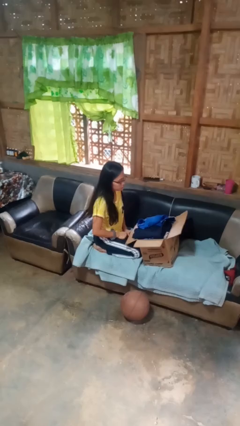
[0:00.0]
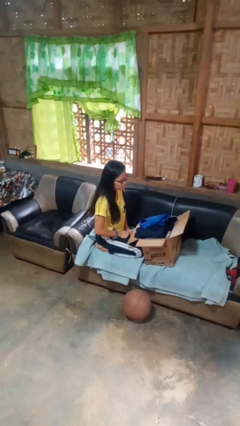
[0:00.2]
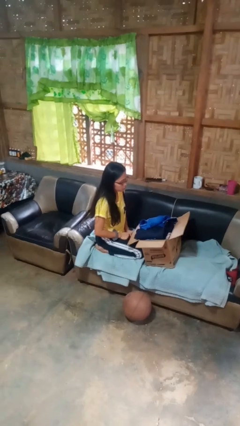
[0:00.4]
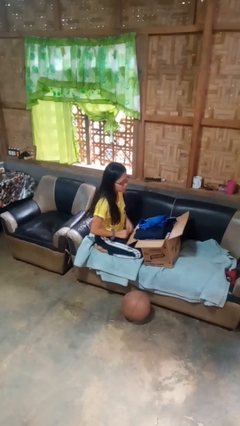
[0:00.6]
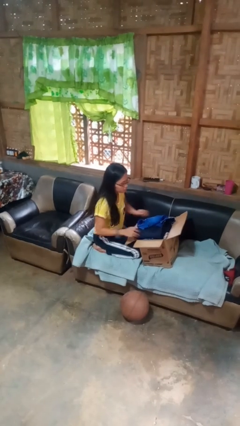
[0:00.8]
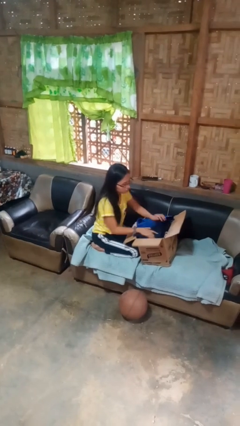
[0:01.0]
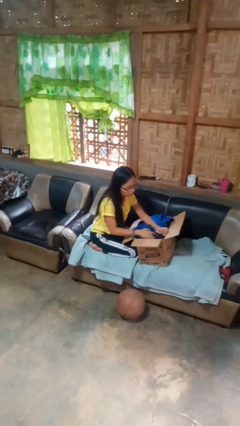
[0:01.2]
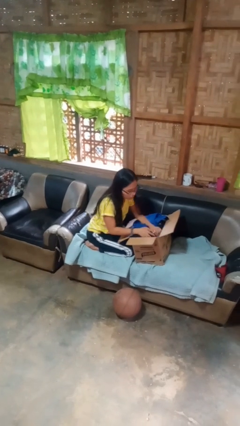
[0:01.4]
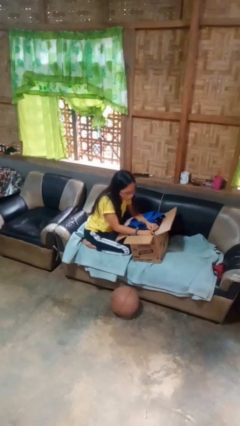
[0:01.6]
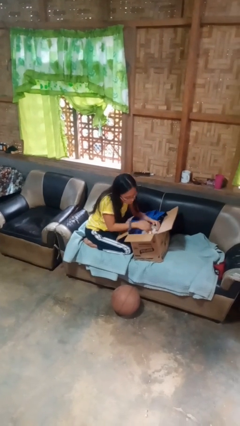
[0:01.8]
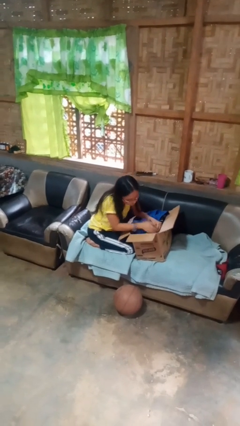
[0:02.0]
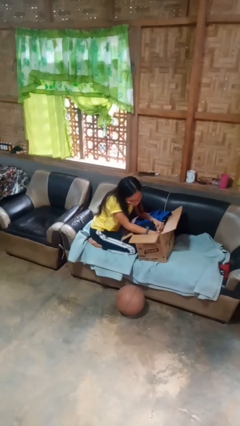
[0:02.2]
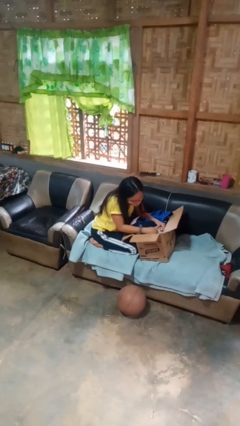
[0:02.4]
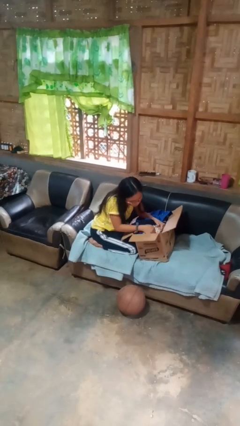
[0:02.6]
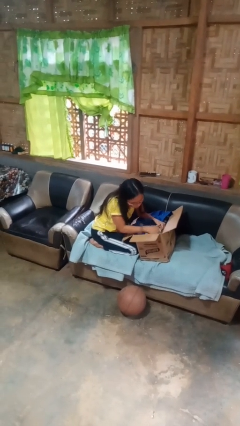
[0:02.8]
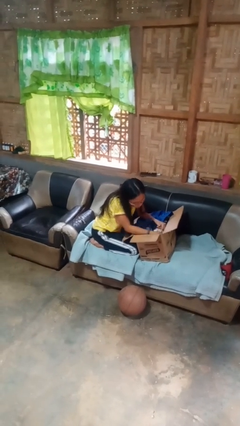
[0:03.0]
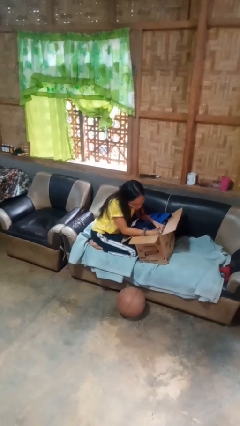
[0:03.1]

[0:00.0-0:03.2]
person searches in box

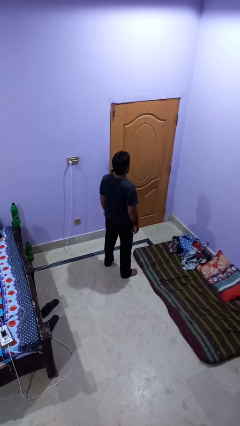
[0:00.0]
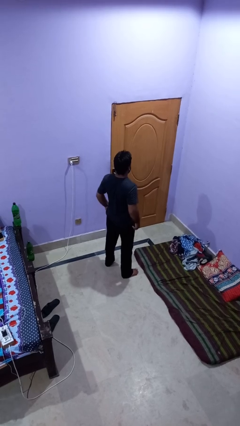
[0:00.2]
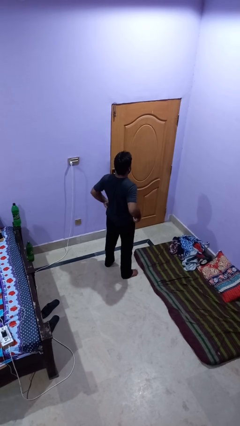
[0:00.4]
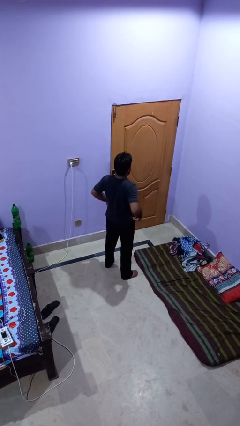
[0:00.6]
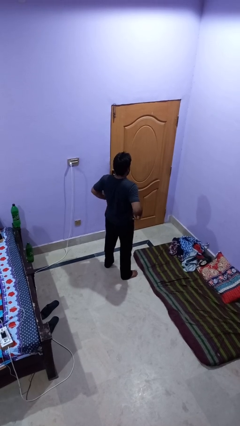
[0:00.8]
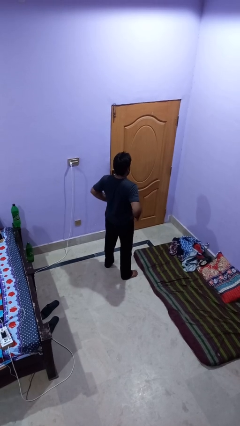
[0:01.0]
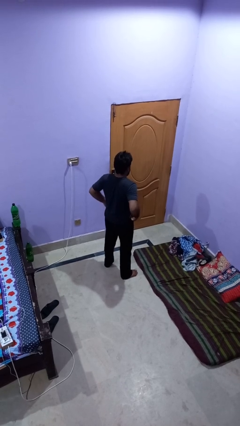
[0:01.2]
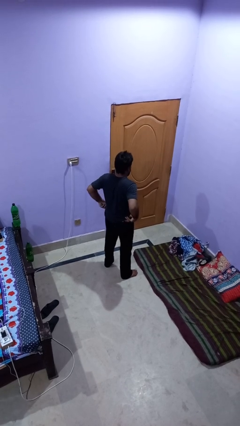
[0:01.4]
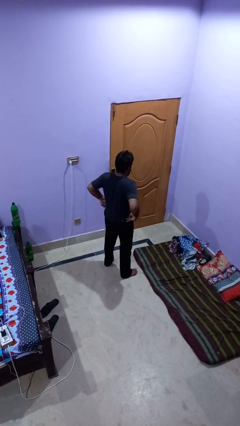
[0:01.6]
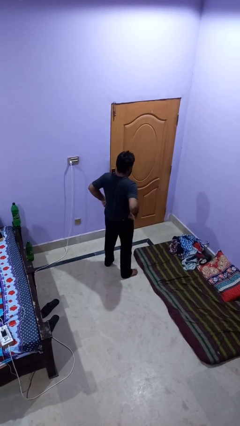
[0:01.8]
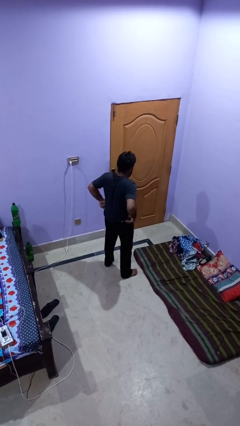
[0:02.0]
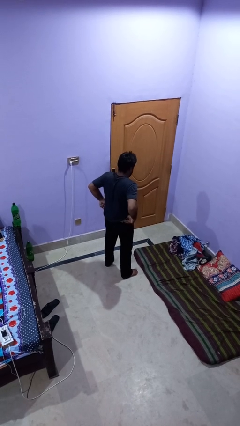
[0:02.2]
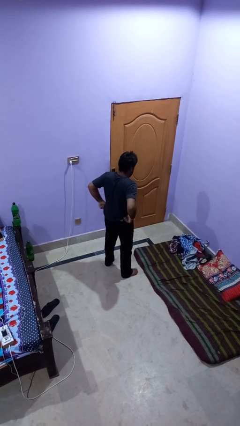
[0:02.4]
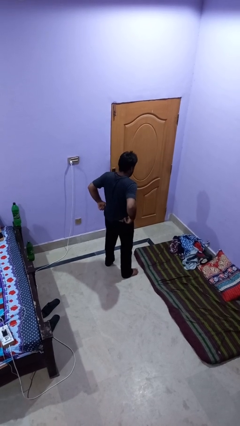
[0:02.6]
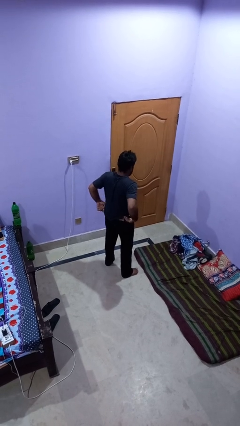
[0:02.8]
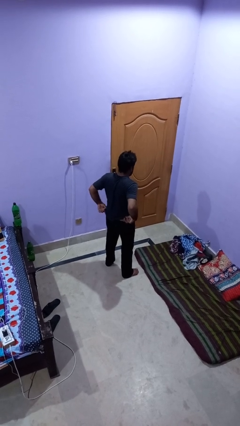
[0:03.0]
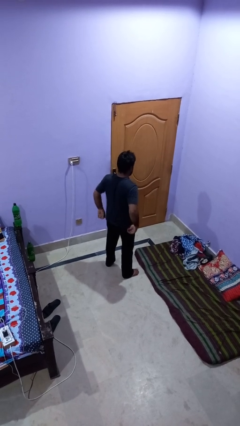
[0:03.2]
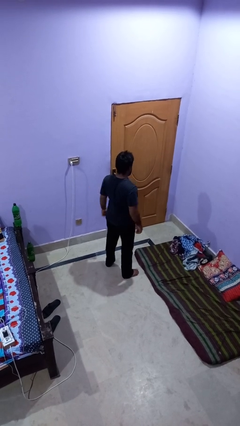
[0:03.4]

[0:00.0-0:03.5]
person hikes up pants

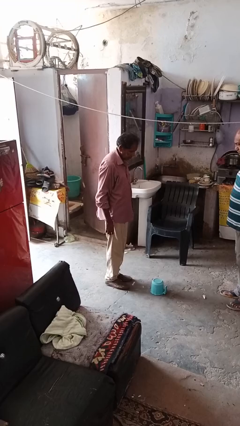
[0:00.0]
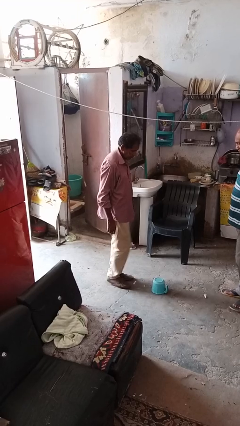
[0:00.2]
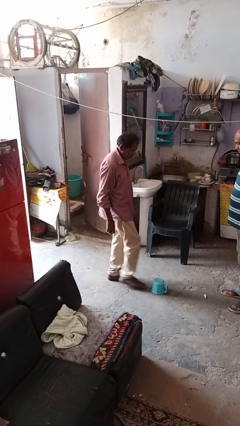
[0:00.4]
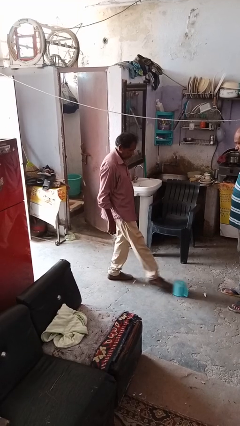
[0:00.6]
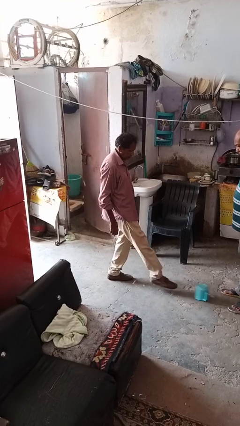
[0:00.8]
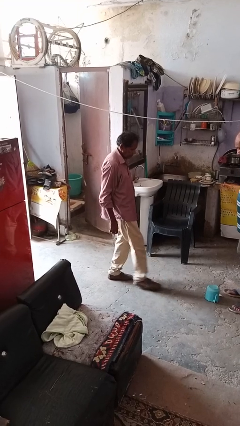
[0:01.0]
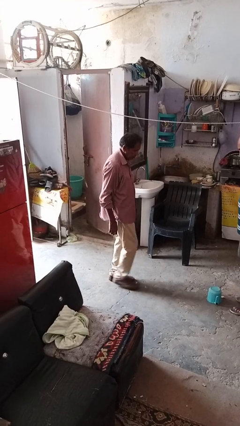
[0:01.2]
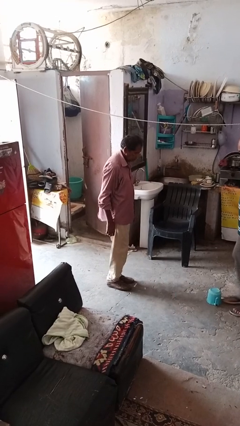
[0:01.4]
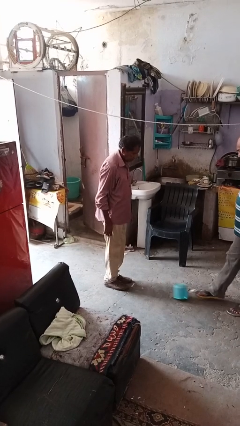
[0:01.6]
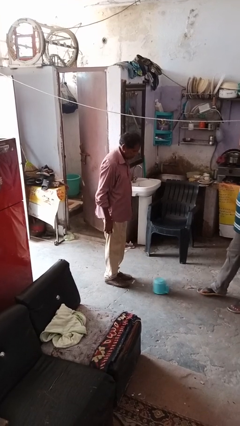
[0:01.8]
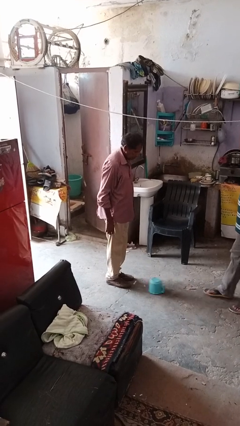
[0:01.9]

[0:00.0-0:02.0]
person kicks object to person

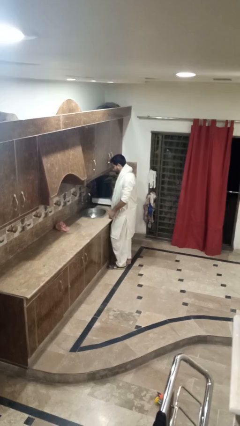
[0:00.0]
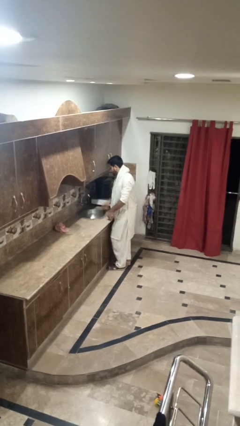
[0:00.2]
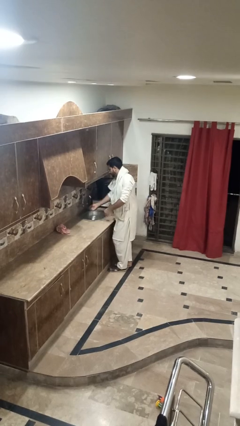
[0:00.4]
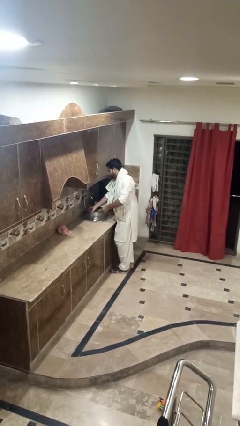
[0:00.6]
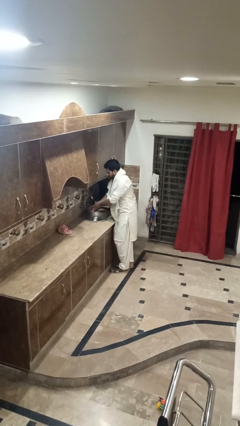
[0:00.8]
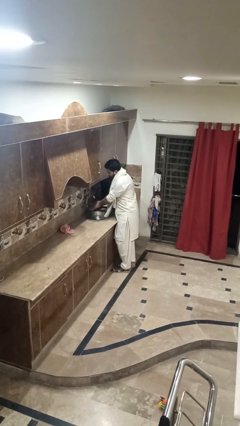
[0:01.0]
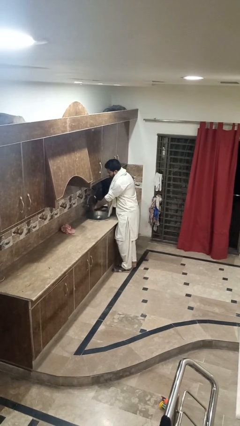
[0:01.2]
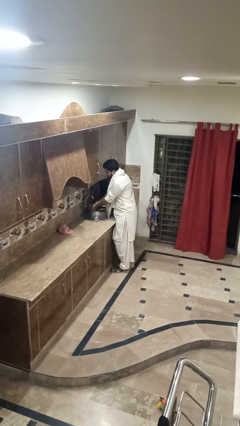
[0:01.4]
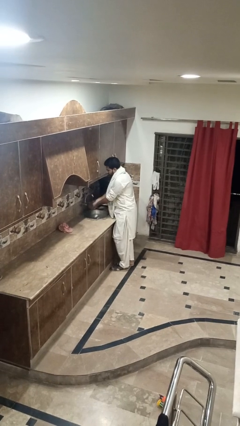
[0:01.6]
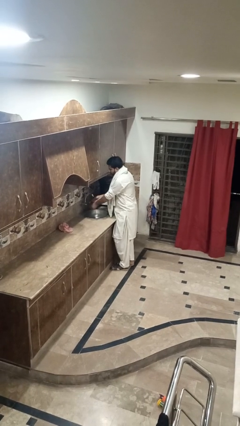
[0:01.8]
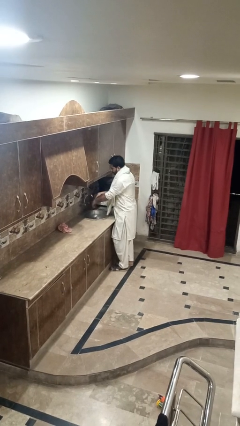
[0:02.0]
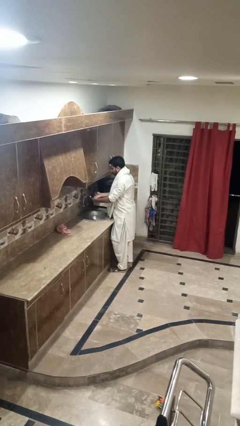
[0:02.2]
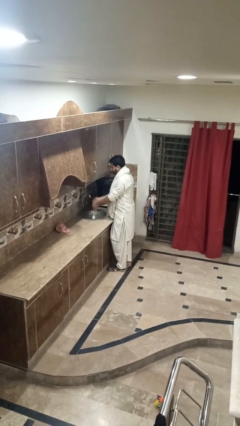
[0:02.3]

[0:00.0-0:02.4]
person washes hands

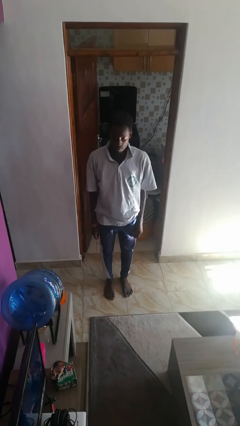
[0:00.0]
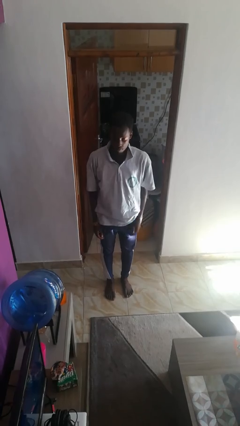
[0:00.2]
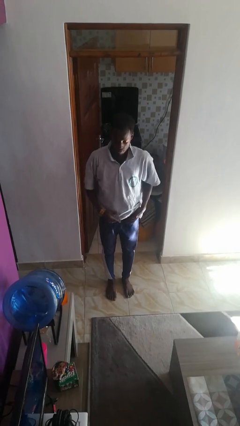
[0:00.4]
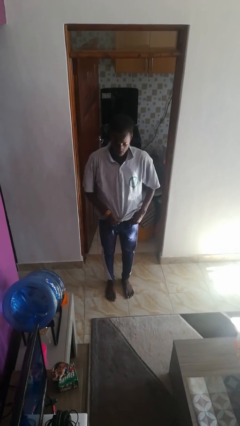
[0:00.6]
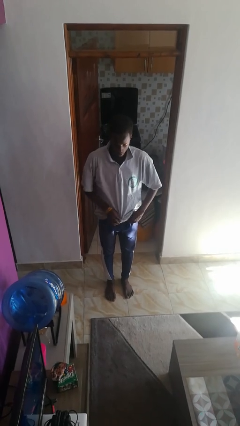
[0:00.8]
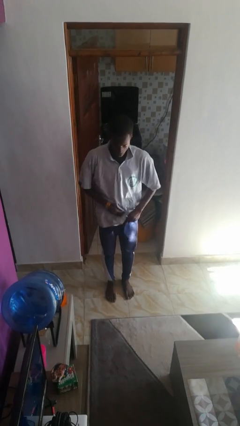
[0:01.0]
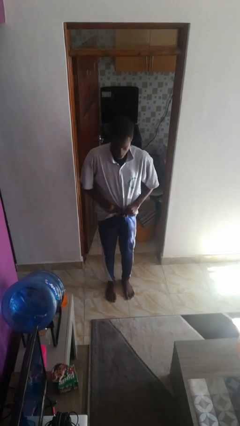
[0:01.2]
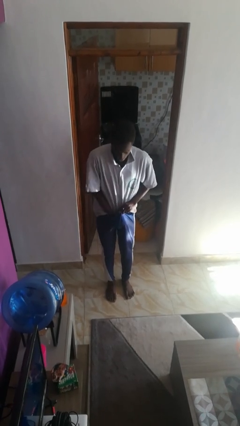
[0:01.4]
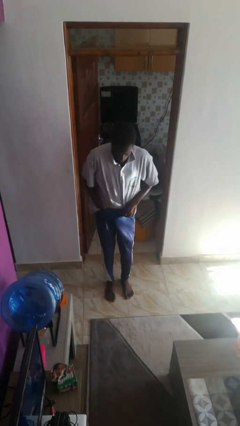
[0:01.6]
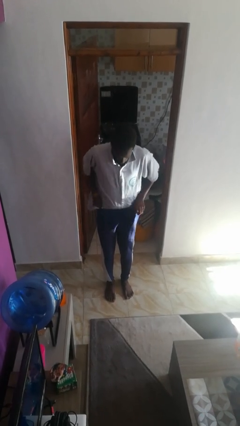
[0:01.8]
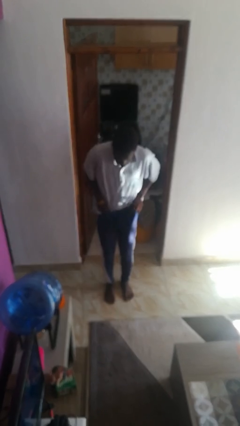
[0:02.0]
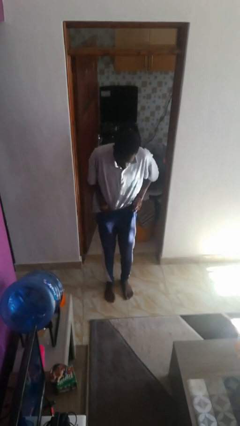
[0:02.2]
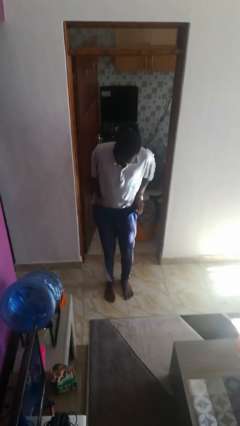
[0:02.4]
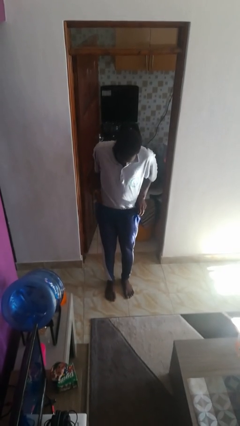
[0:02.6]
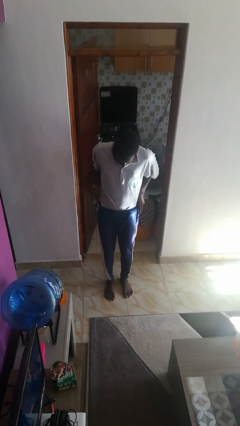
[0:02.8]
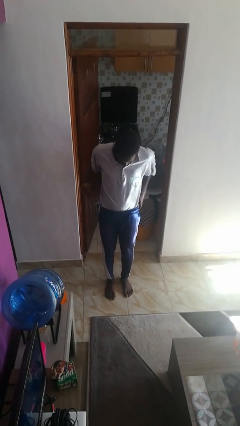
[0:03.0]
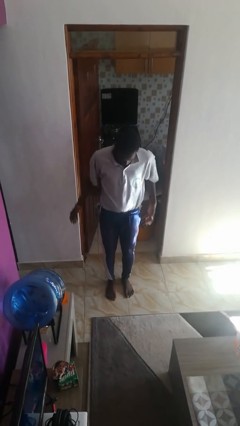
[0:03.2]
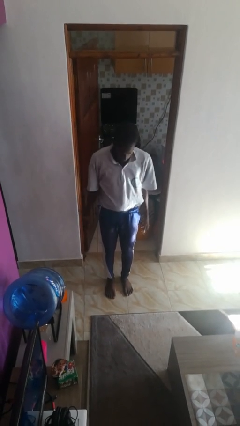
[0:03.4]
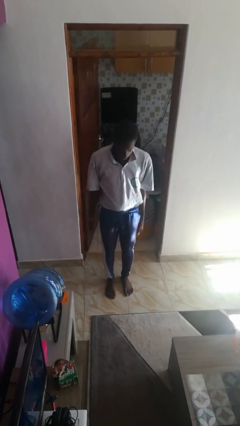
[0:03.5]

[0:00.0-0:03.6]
person tucks in shirt

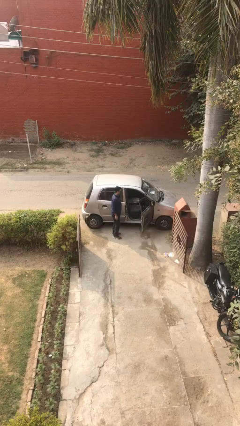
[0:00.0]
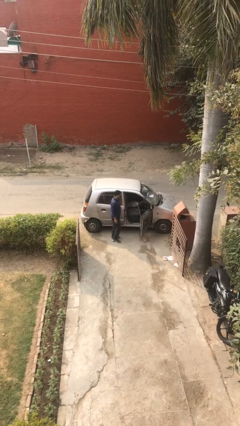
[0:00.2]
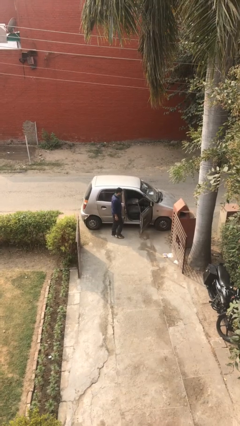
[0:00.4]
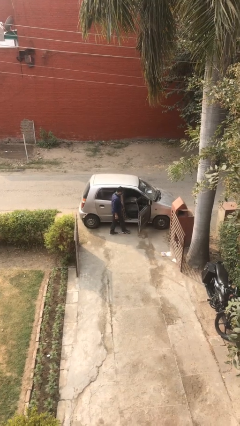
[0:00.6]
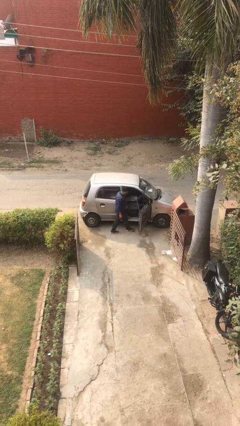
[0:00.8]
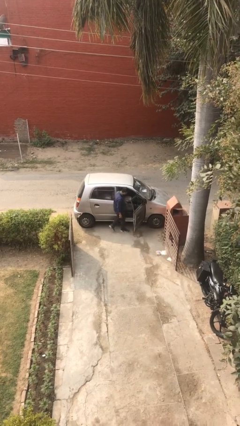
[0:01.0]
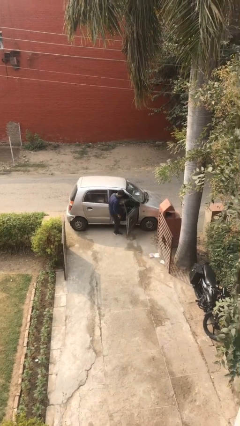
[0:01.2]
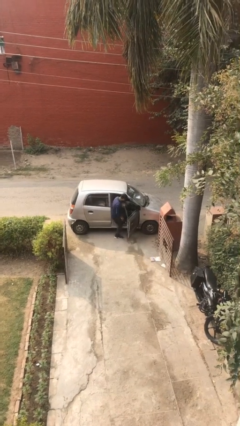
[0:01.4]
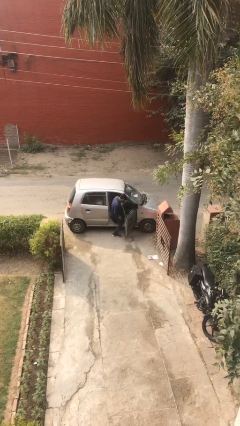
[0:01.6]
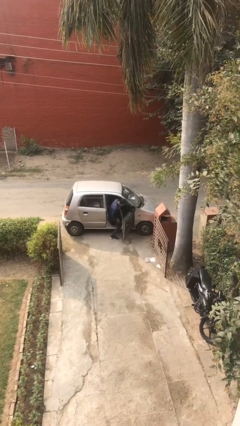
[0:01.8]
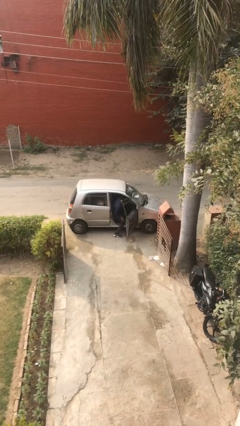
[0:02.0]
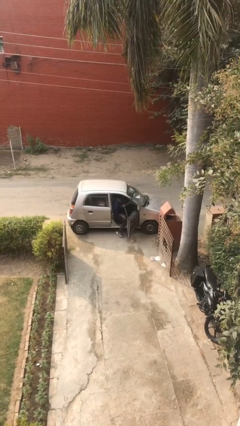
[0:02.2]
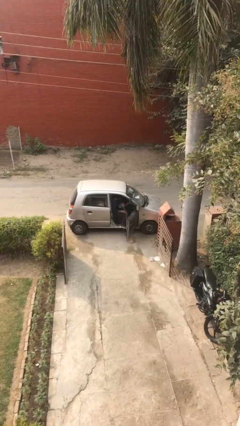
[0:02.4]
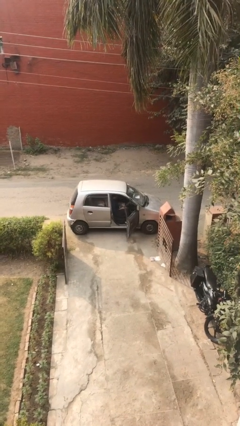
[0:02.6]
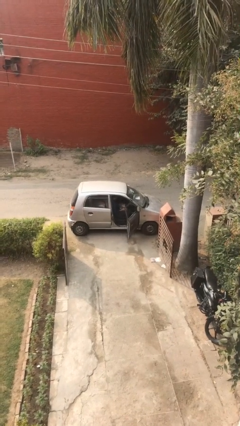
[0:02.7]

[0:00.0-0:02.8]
person enters car
